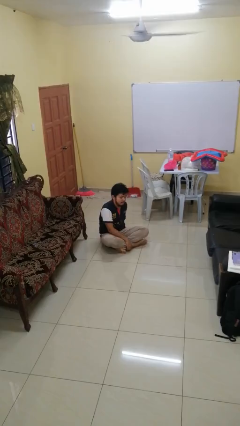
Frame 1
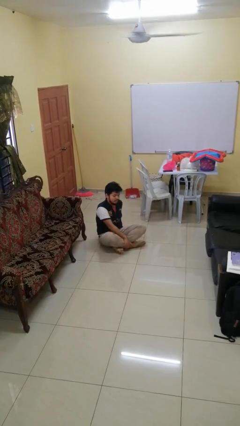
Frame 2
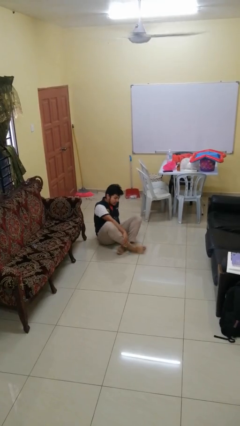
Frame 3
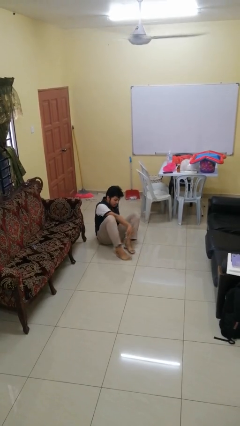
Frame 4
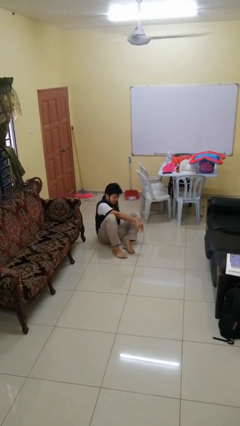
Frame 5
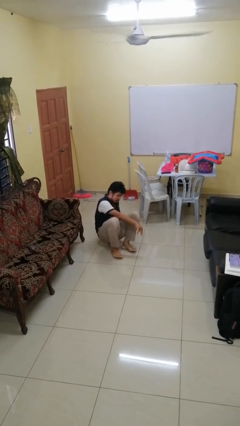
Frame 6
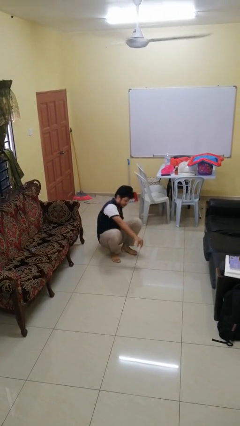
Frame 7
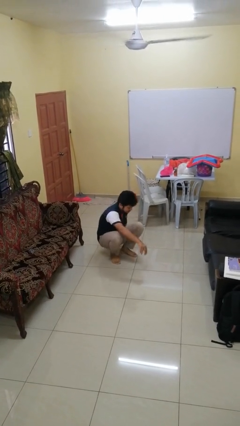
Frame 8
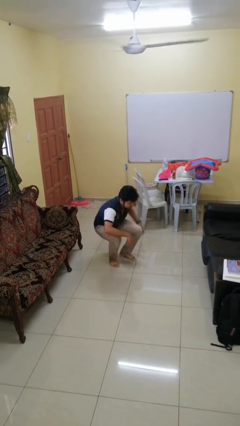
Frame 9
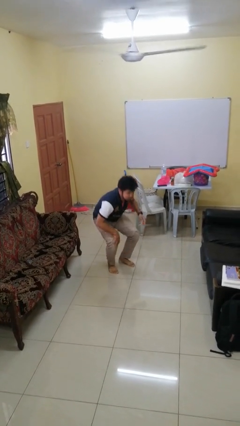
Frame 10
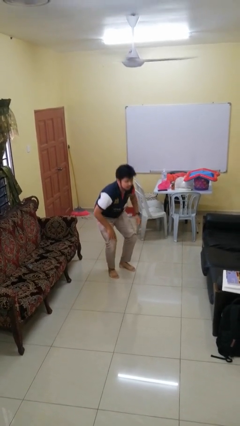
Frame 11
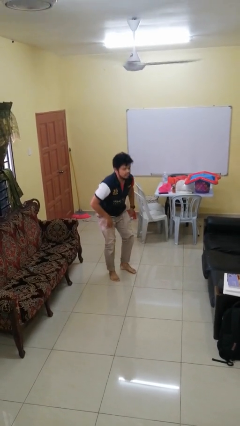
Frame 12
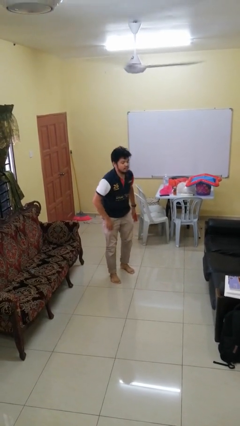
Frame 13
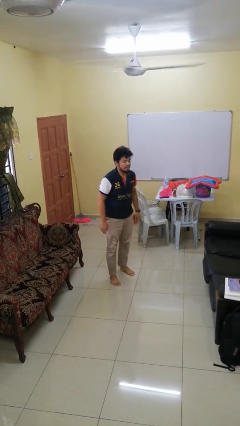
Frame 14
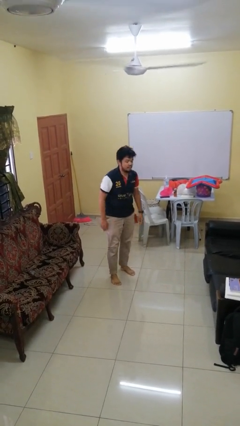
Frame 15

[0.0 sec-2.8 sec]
person stands up from floor

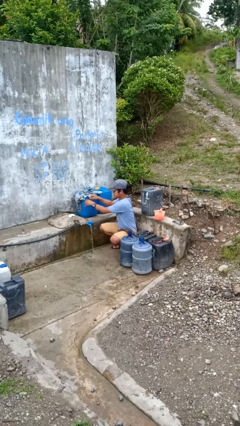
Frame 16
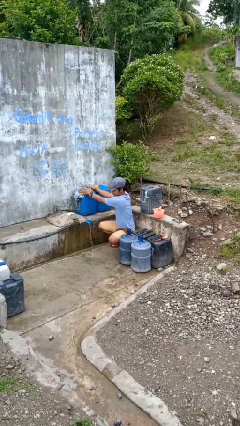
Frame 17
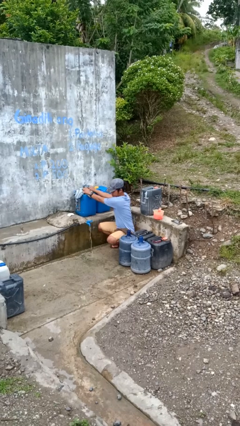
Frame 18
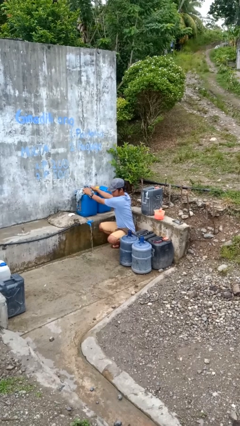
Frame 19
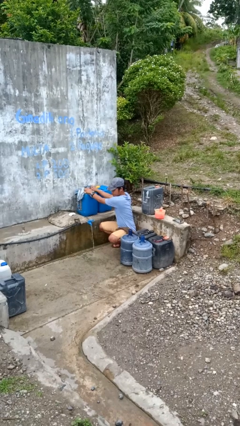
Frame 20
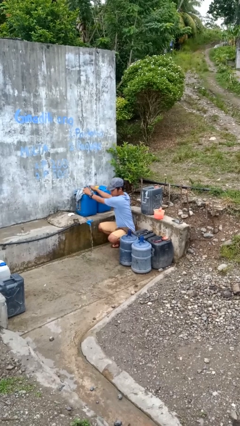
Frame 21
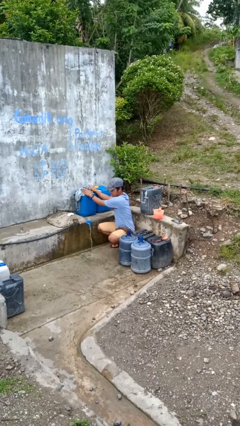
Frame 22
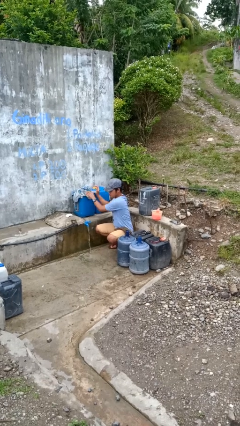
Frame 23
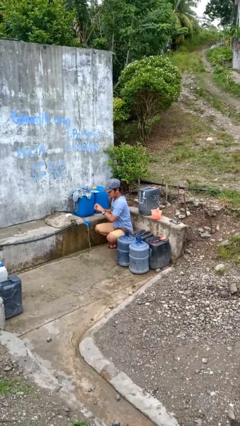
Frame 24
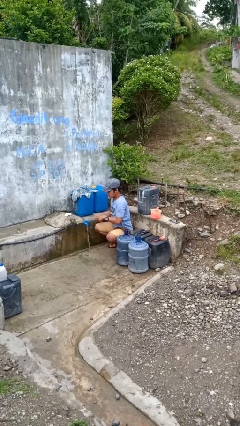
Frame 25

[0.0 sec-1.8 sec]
person dries hands with towel

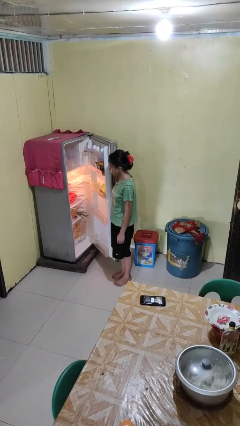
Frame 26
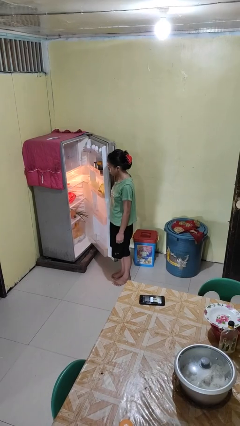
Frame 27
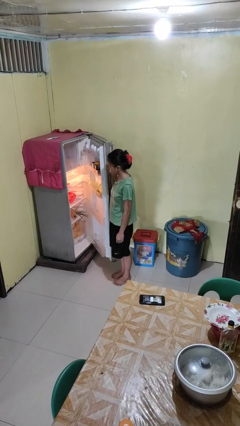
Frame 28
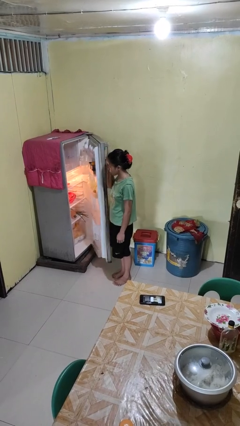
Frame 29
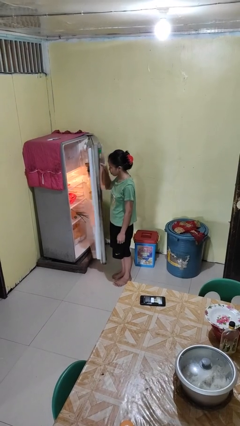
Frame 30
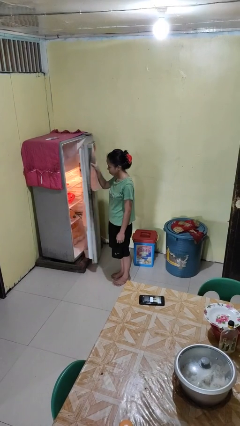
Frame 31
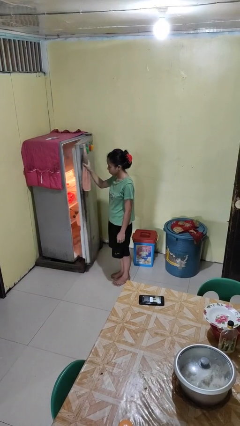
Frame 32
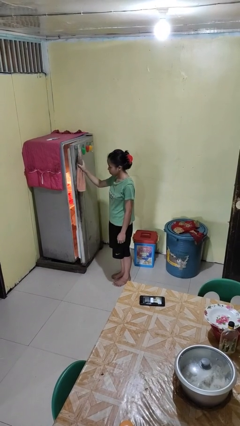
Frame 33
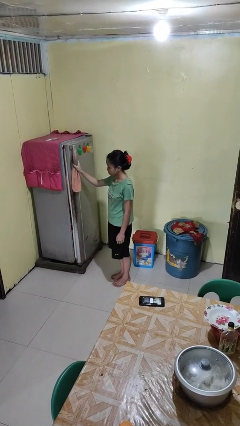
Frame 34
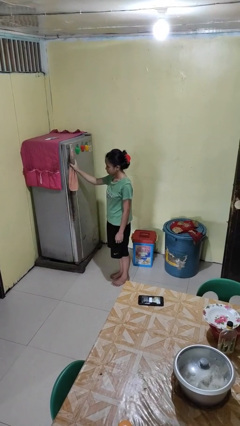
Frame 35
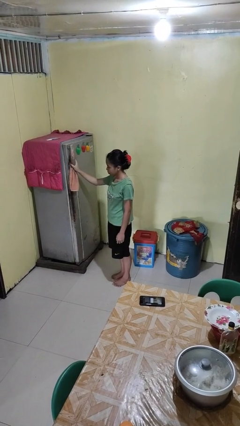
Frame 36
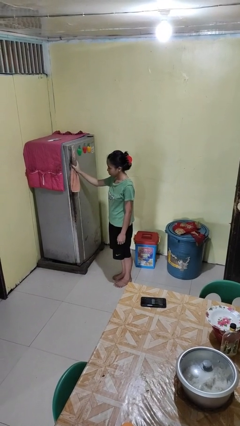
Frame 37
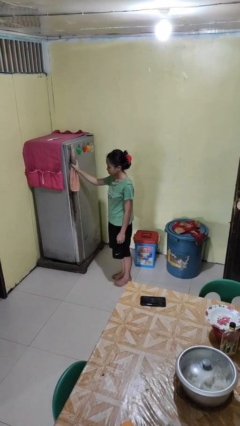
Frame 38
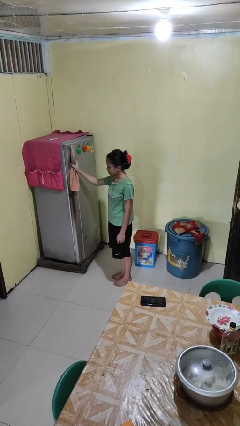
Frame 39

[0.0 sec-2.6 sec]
person closes refrigerator

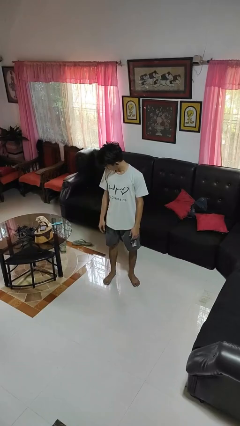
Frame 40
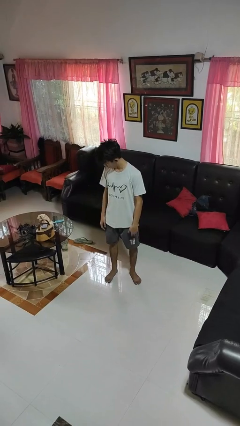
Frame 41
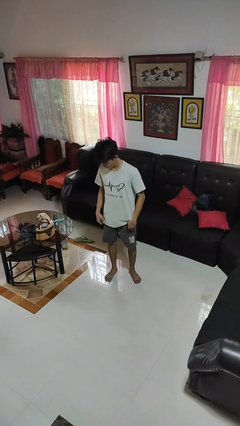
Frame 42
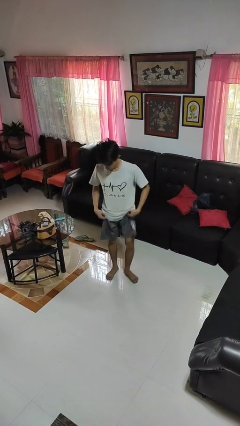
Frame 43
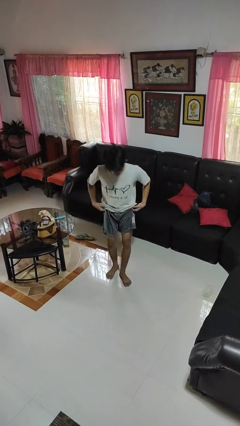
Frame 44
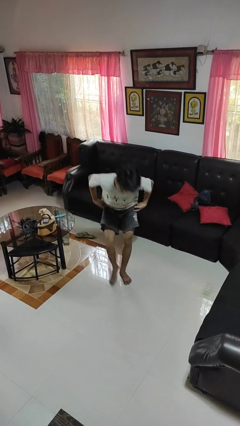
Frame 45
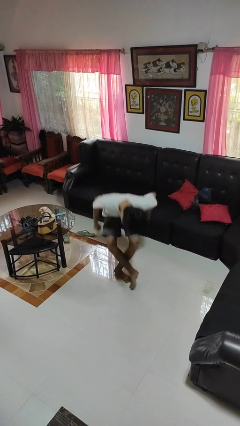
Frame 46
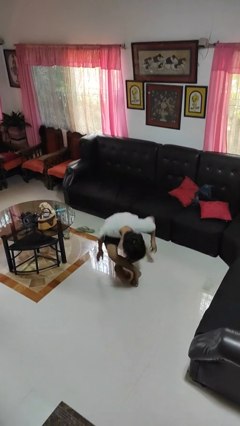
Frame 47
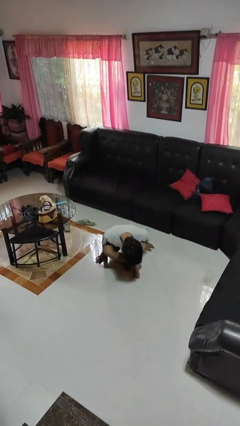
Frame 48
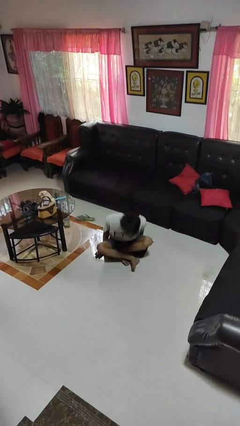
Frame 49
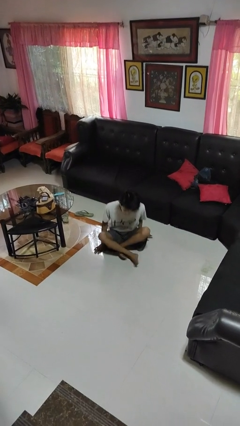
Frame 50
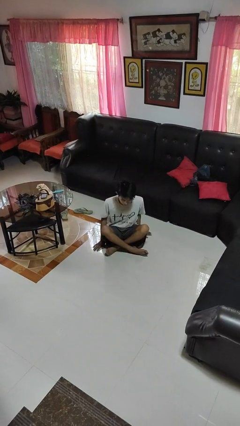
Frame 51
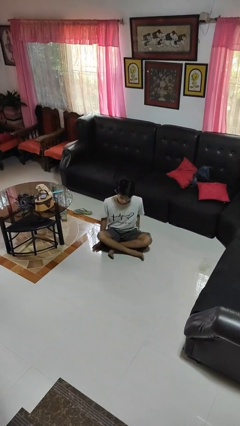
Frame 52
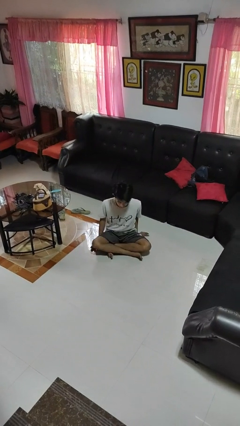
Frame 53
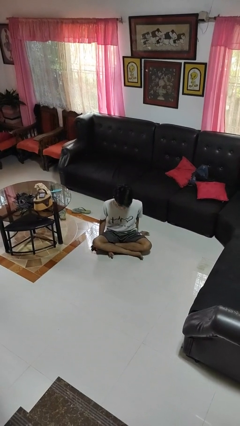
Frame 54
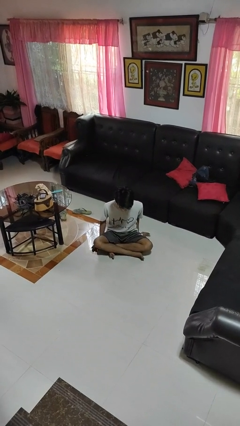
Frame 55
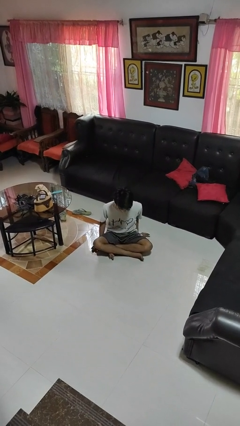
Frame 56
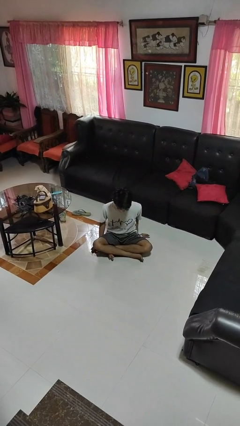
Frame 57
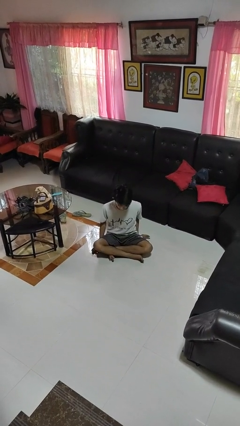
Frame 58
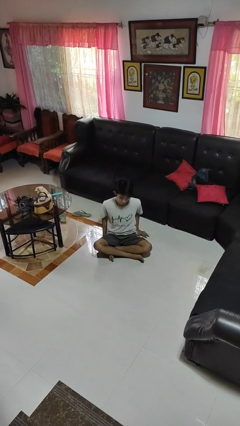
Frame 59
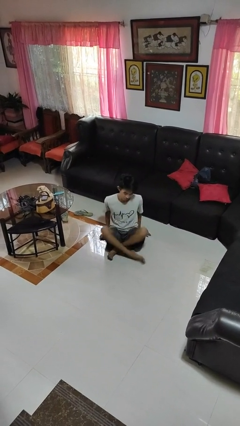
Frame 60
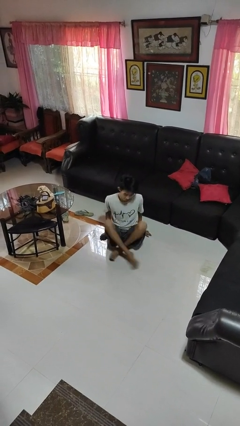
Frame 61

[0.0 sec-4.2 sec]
person sits crisscross

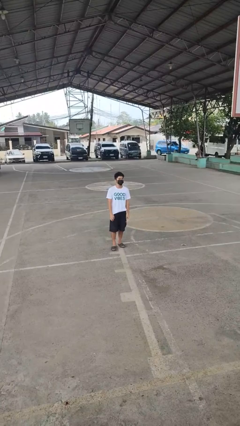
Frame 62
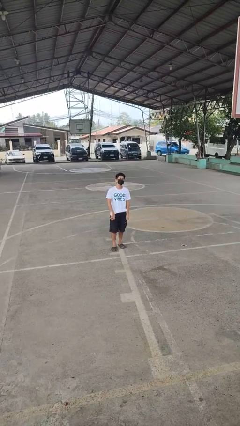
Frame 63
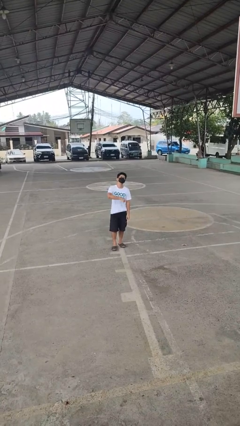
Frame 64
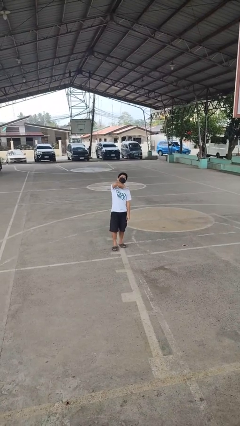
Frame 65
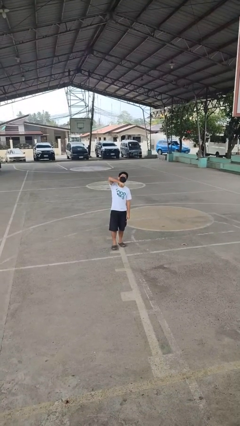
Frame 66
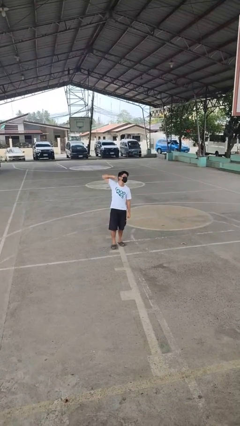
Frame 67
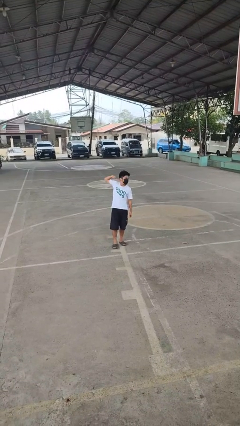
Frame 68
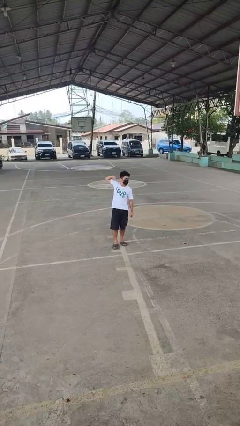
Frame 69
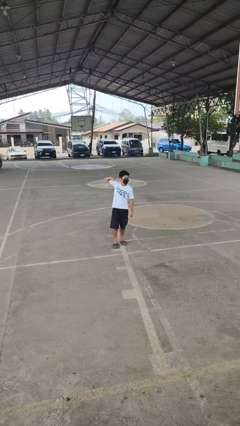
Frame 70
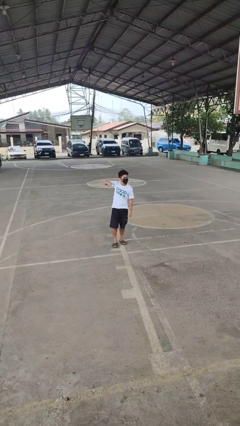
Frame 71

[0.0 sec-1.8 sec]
person gestures cut

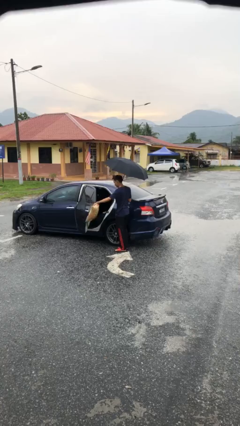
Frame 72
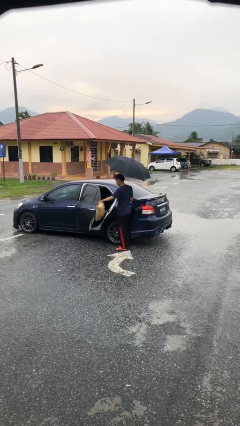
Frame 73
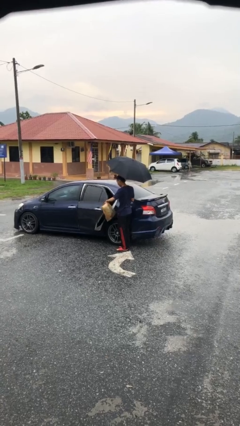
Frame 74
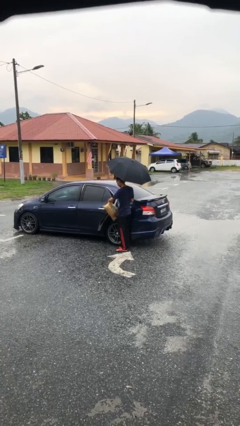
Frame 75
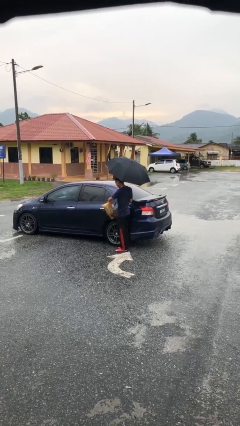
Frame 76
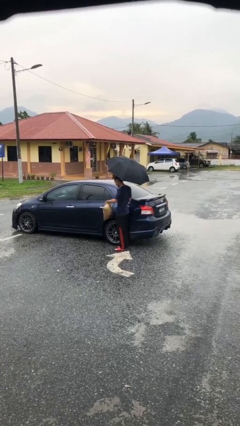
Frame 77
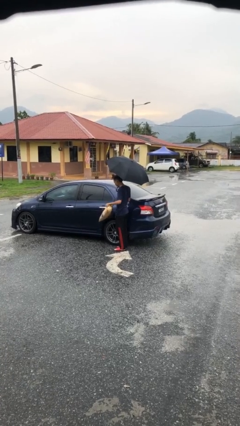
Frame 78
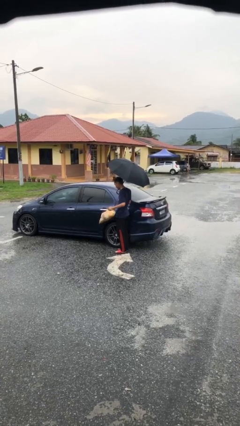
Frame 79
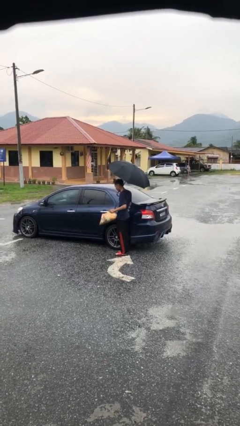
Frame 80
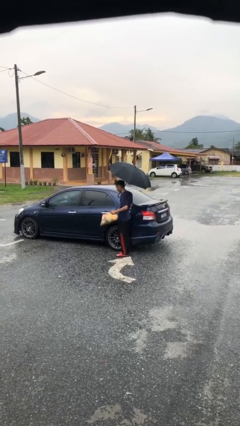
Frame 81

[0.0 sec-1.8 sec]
person closes car door

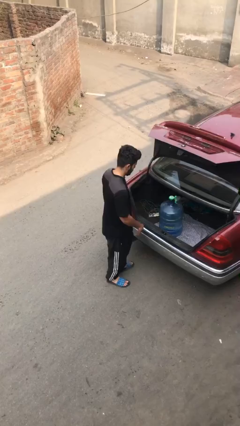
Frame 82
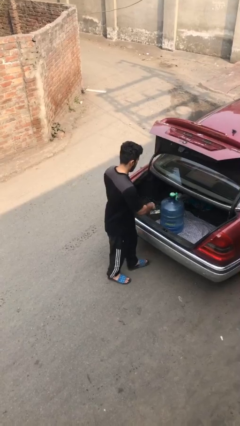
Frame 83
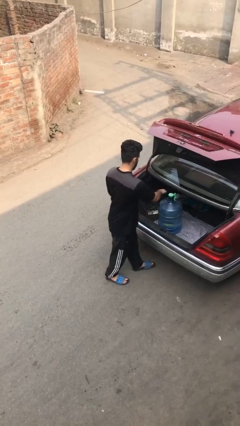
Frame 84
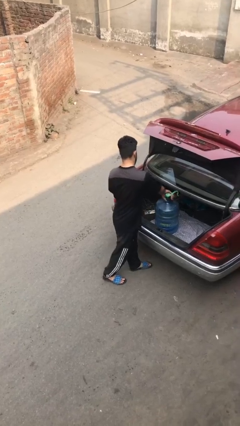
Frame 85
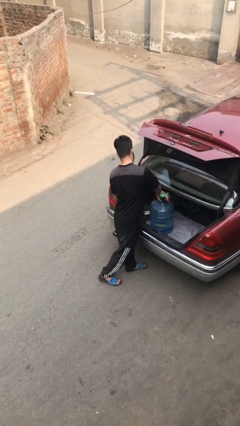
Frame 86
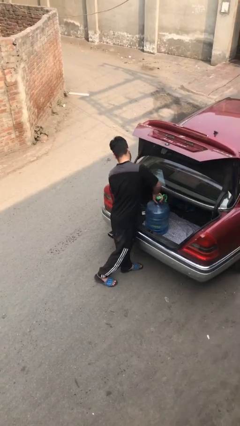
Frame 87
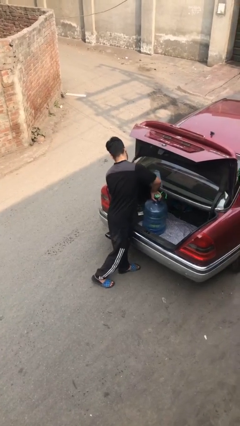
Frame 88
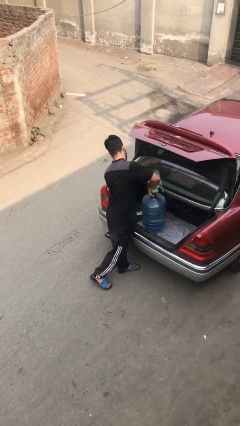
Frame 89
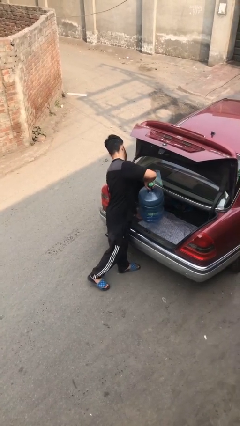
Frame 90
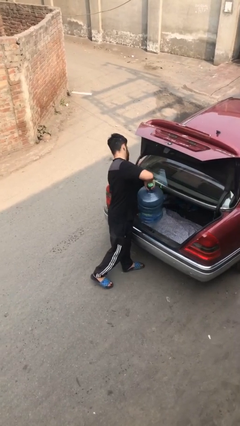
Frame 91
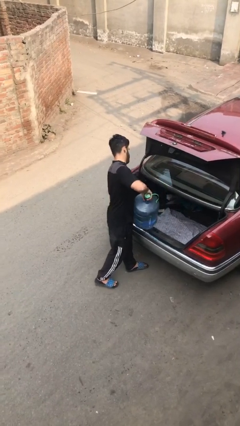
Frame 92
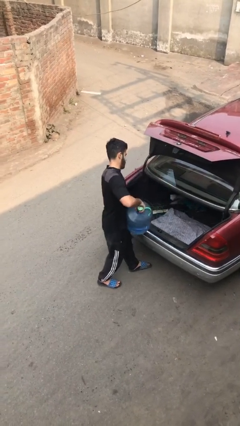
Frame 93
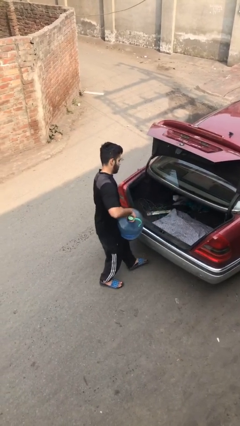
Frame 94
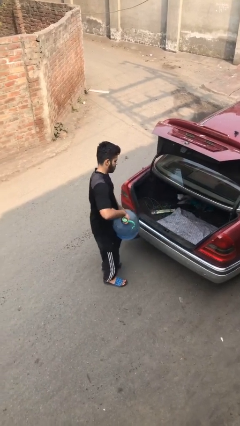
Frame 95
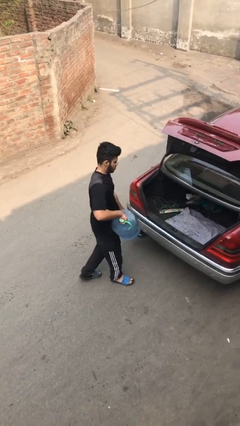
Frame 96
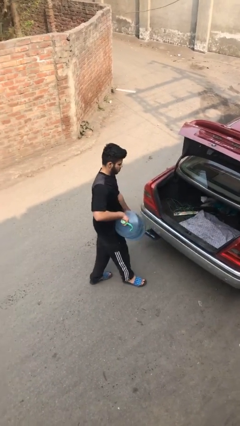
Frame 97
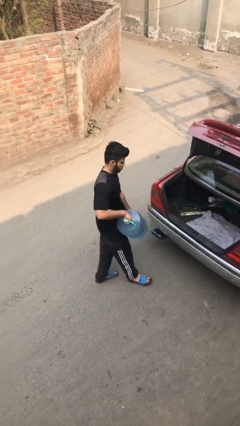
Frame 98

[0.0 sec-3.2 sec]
person unloads car
